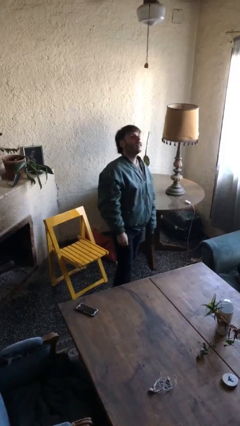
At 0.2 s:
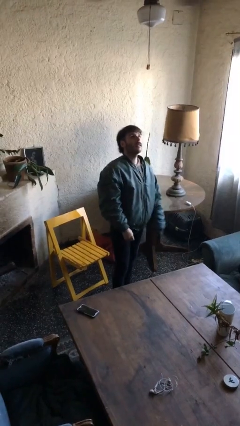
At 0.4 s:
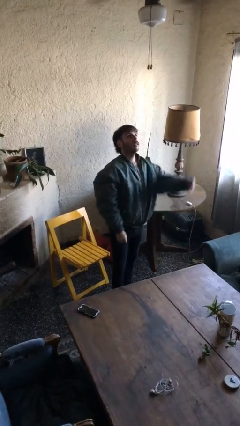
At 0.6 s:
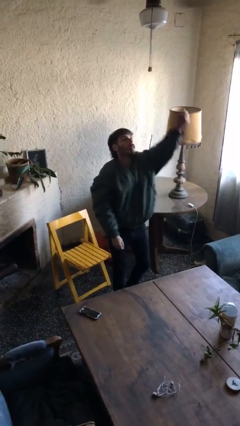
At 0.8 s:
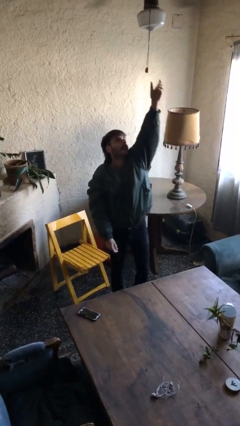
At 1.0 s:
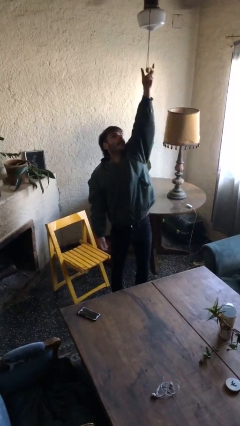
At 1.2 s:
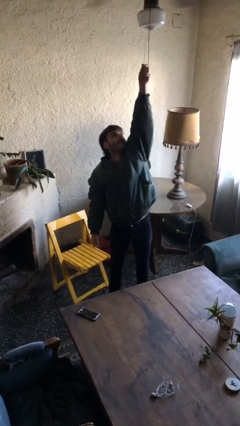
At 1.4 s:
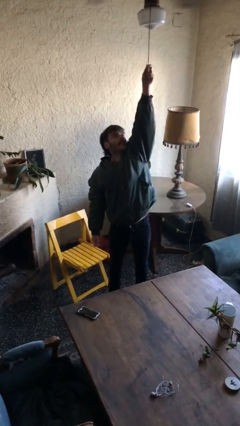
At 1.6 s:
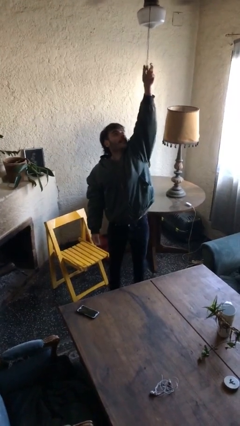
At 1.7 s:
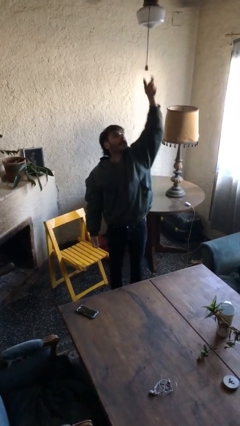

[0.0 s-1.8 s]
person turns on fan

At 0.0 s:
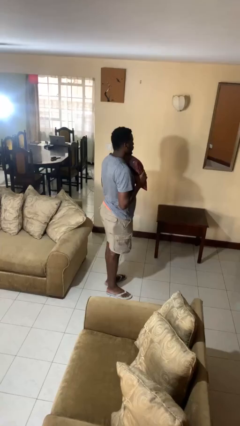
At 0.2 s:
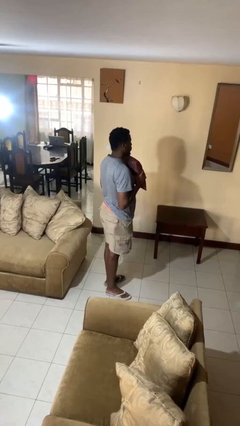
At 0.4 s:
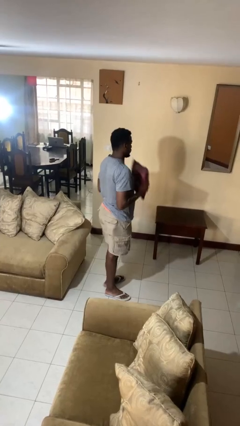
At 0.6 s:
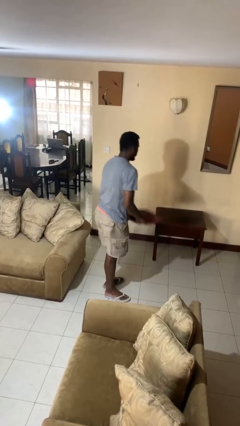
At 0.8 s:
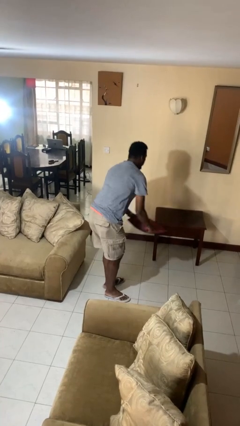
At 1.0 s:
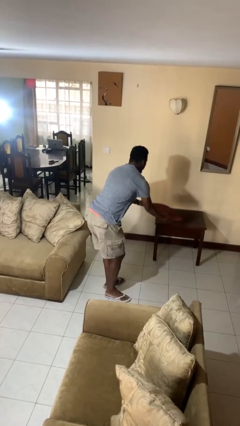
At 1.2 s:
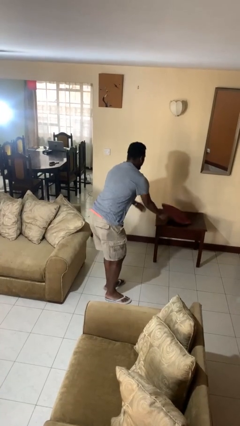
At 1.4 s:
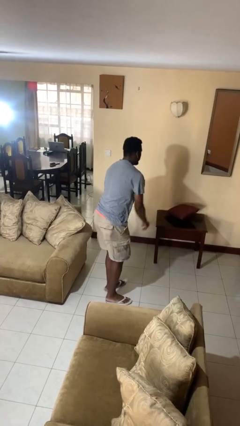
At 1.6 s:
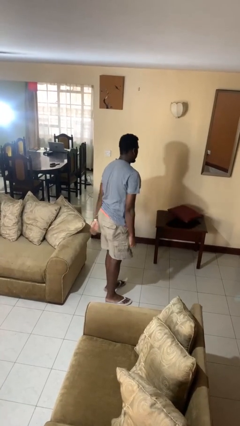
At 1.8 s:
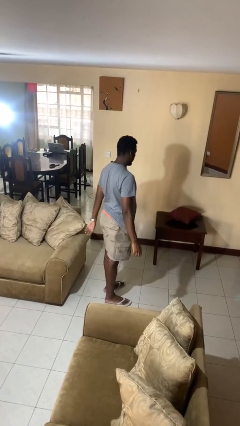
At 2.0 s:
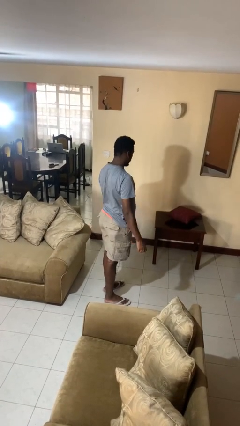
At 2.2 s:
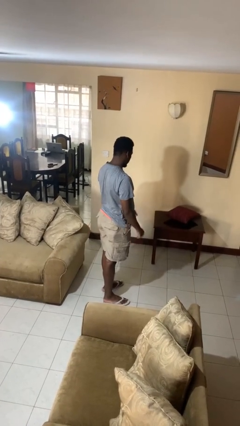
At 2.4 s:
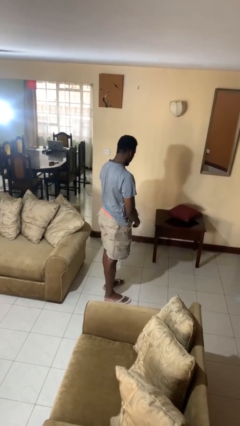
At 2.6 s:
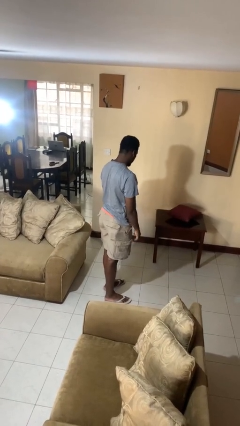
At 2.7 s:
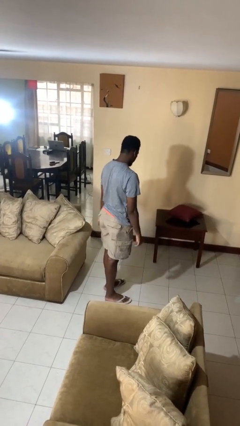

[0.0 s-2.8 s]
person throws object on table

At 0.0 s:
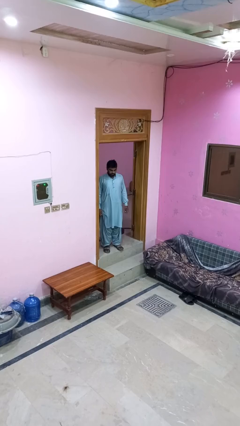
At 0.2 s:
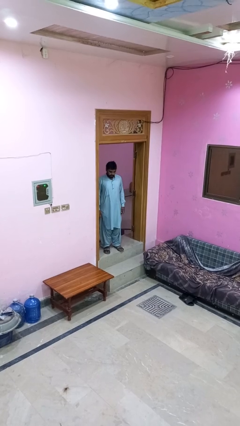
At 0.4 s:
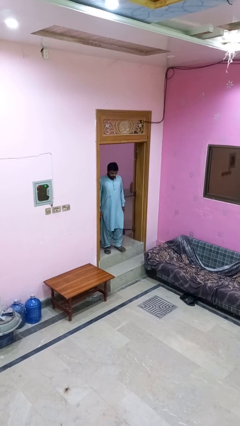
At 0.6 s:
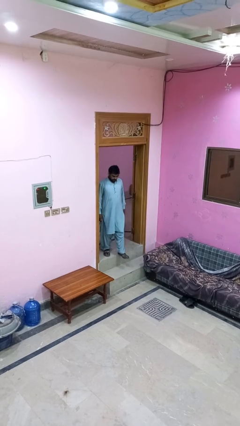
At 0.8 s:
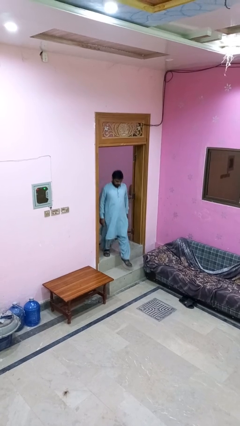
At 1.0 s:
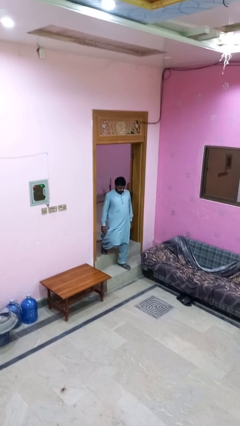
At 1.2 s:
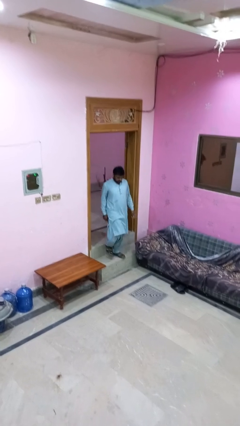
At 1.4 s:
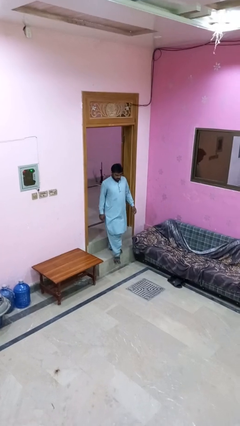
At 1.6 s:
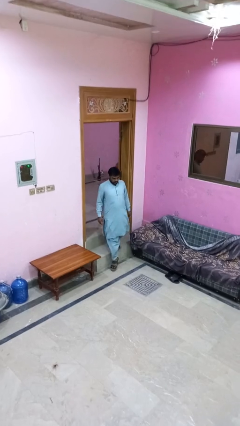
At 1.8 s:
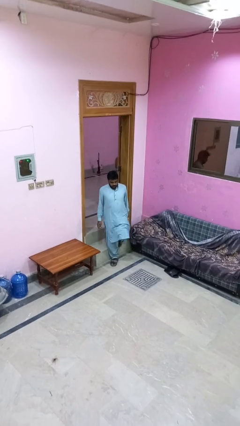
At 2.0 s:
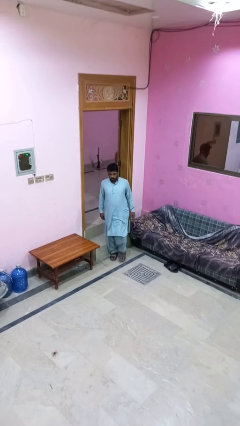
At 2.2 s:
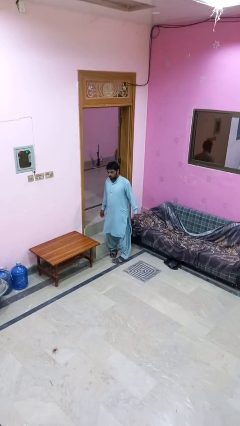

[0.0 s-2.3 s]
person climbs down stairs

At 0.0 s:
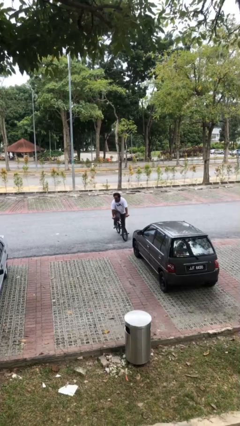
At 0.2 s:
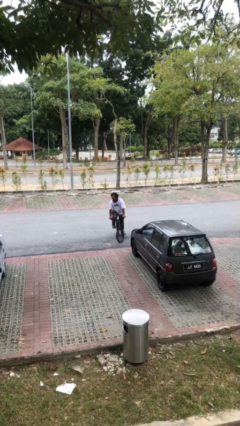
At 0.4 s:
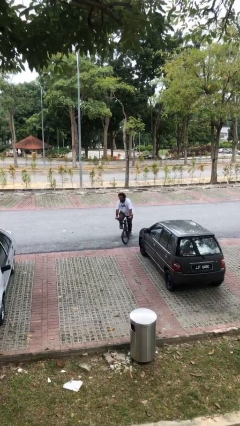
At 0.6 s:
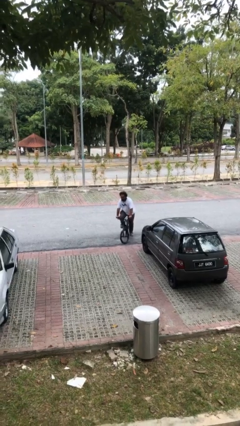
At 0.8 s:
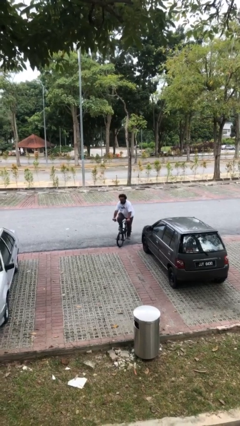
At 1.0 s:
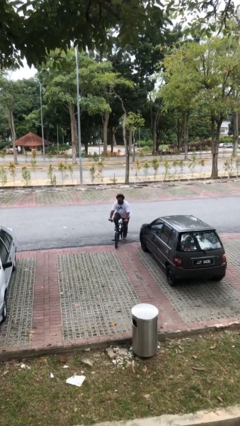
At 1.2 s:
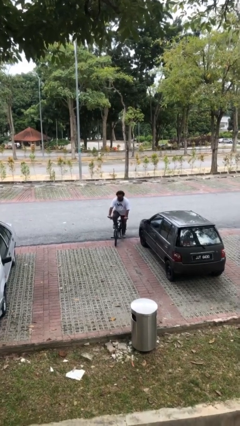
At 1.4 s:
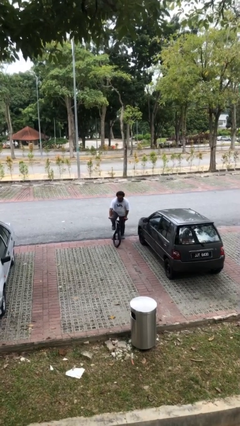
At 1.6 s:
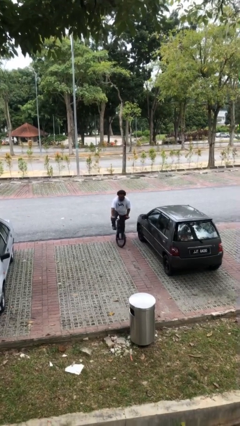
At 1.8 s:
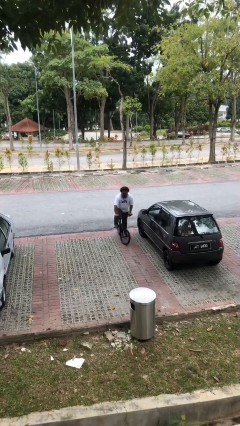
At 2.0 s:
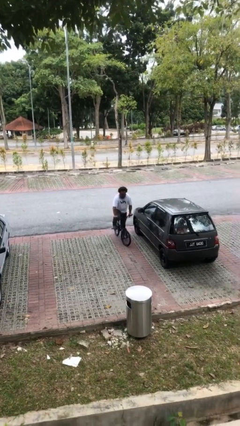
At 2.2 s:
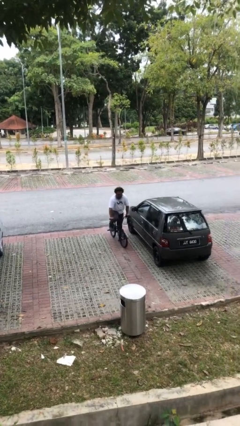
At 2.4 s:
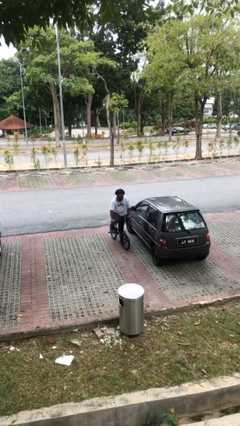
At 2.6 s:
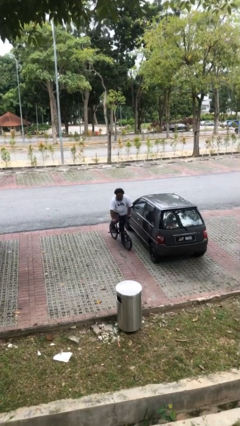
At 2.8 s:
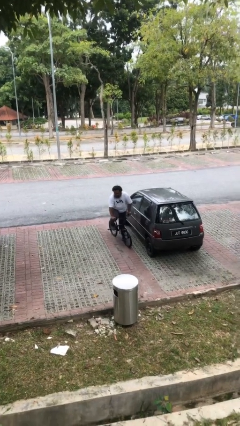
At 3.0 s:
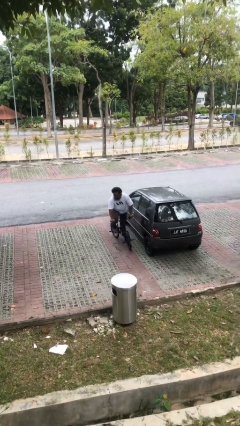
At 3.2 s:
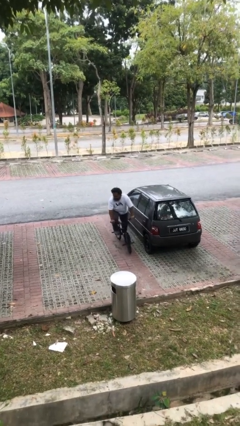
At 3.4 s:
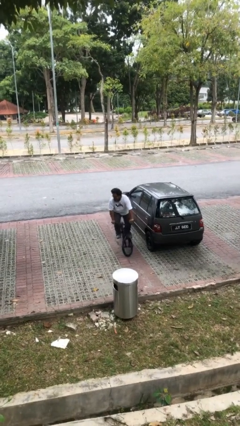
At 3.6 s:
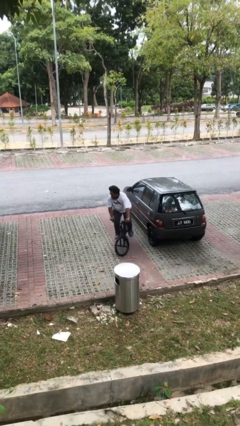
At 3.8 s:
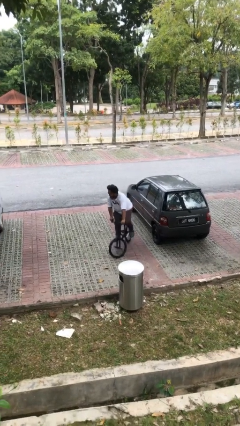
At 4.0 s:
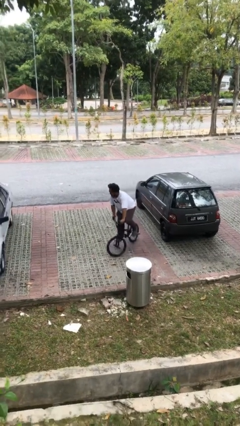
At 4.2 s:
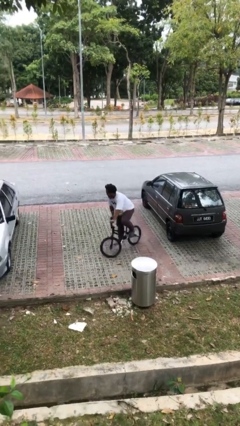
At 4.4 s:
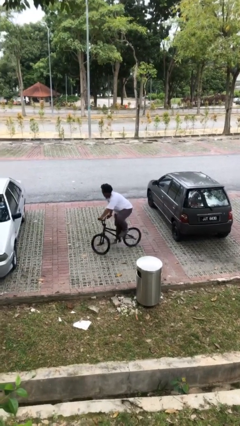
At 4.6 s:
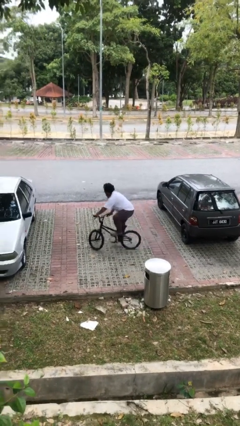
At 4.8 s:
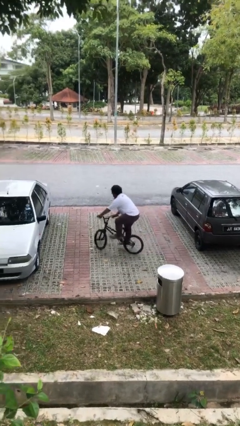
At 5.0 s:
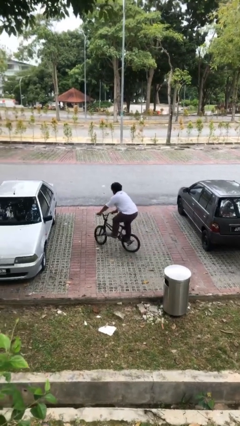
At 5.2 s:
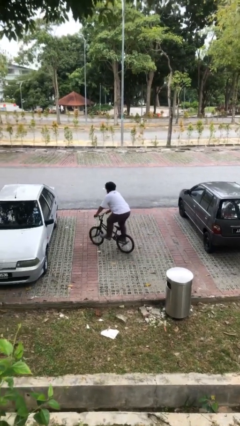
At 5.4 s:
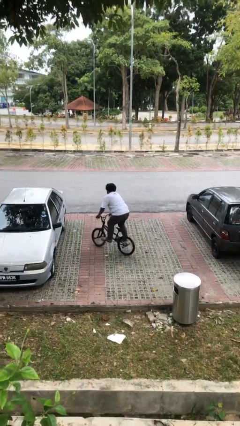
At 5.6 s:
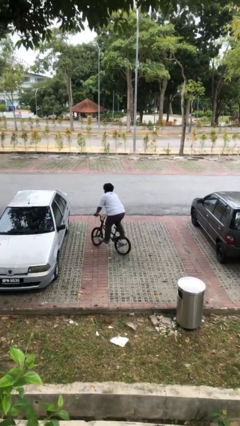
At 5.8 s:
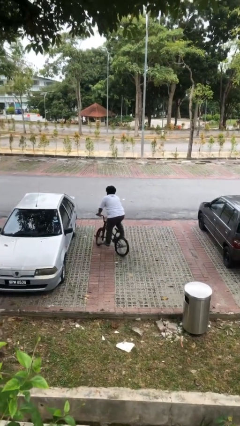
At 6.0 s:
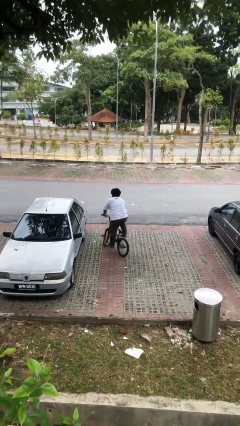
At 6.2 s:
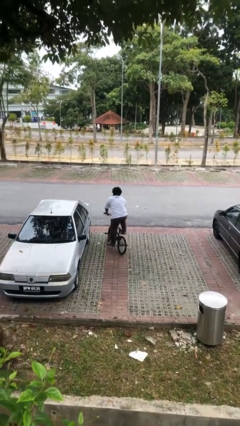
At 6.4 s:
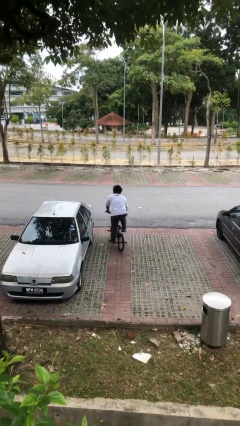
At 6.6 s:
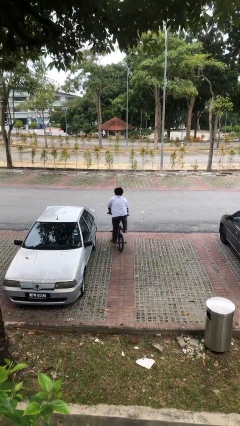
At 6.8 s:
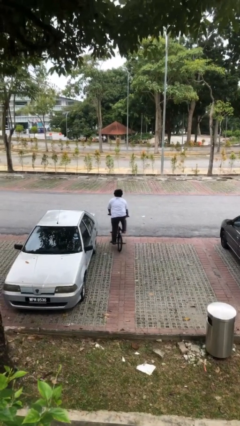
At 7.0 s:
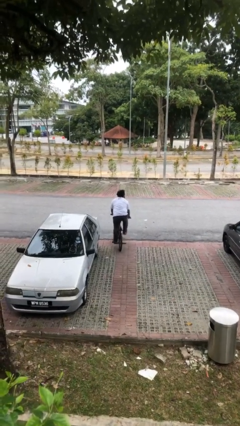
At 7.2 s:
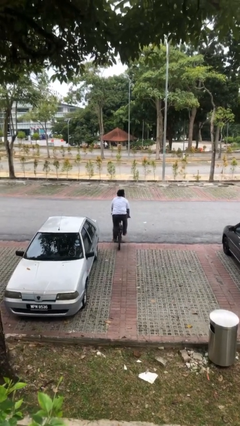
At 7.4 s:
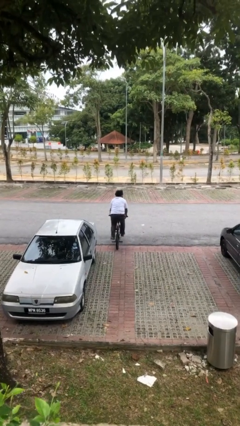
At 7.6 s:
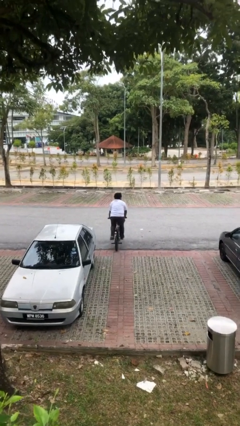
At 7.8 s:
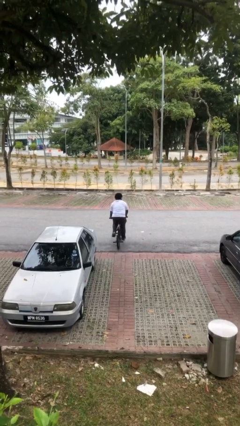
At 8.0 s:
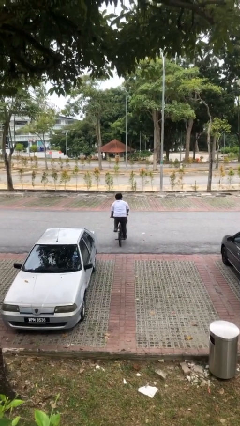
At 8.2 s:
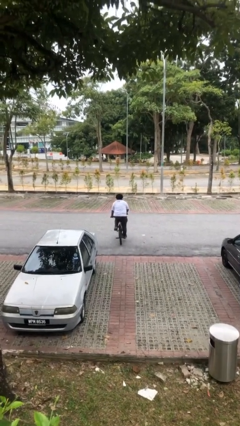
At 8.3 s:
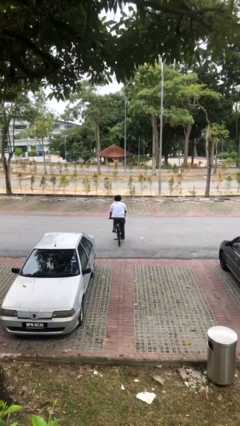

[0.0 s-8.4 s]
person rides bicycle

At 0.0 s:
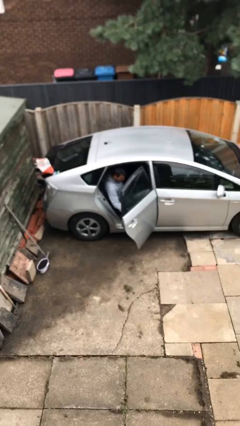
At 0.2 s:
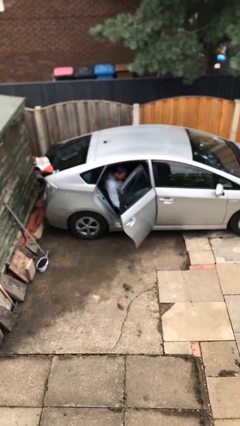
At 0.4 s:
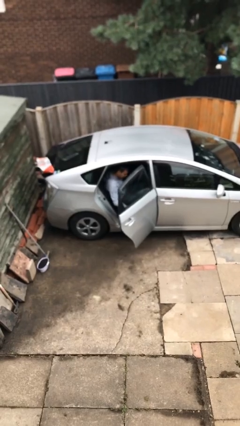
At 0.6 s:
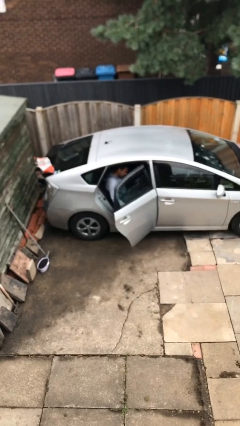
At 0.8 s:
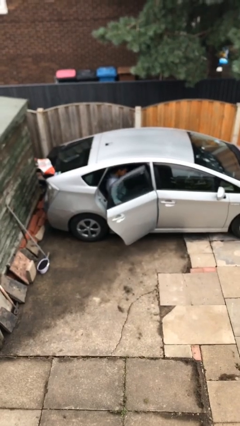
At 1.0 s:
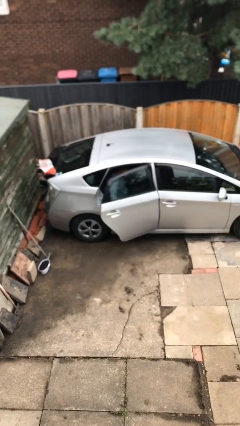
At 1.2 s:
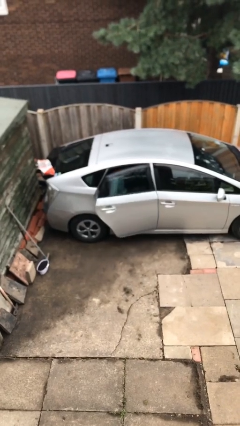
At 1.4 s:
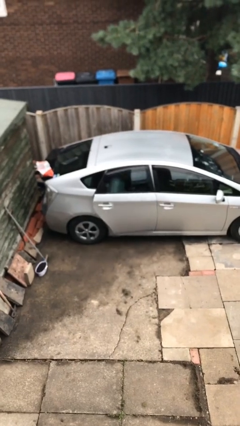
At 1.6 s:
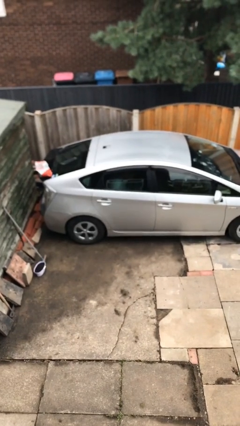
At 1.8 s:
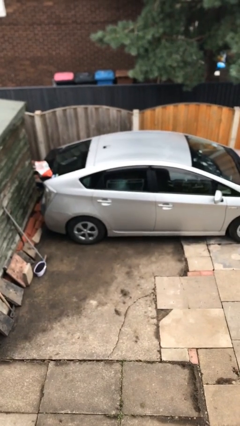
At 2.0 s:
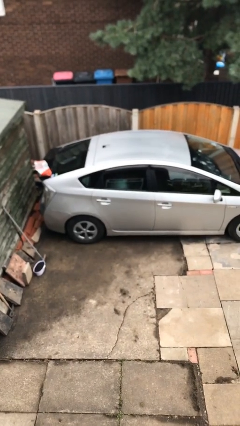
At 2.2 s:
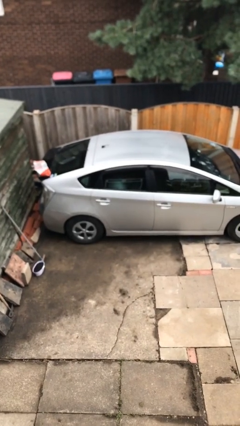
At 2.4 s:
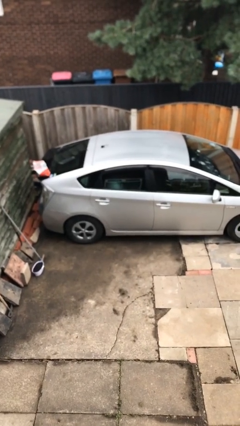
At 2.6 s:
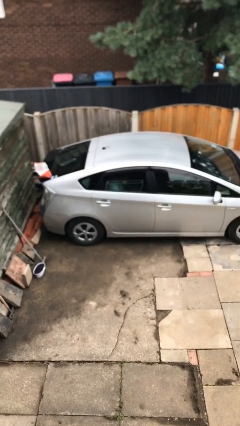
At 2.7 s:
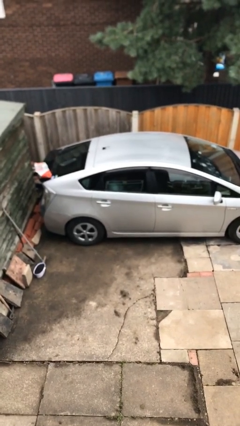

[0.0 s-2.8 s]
person closes car door
